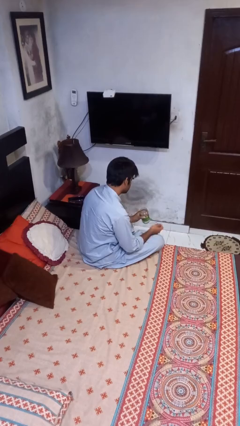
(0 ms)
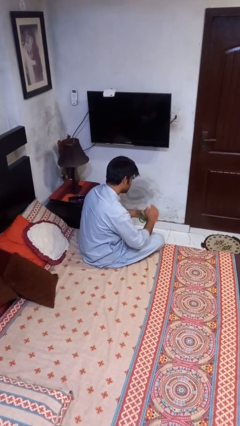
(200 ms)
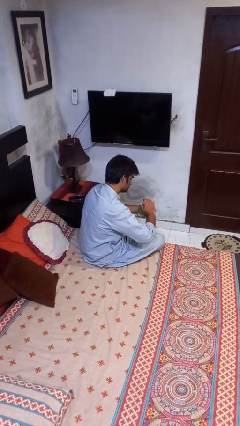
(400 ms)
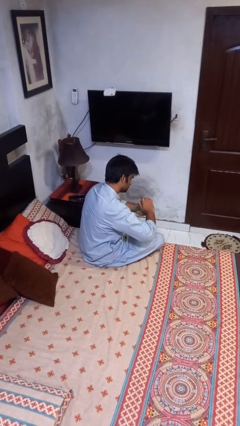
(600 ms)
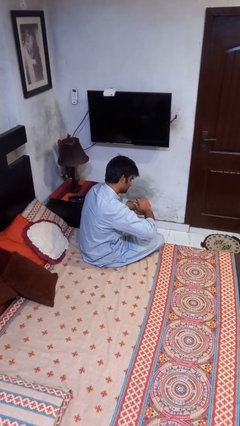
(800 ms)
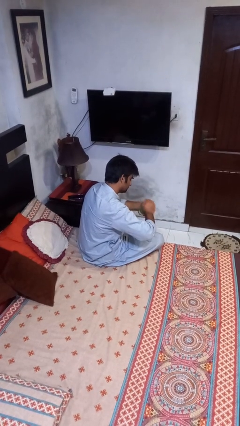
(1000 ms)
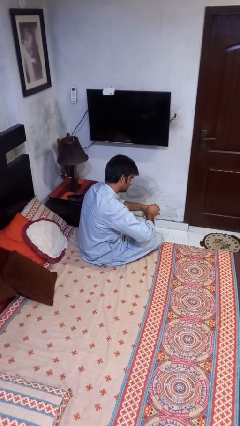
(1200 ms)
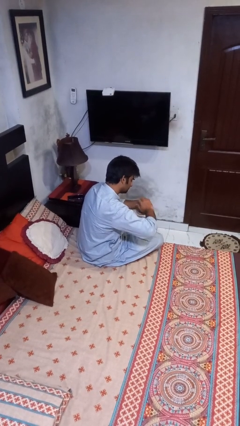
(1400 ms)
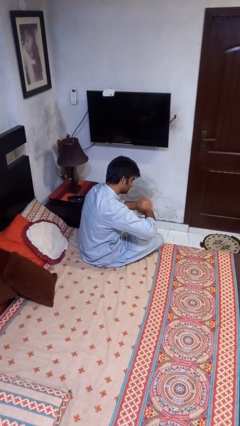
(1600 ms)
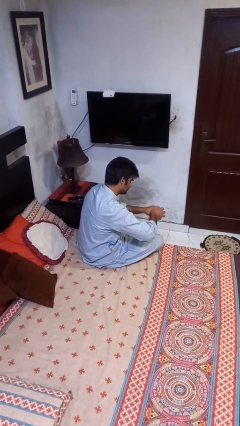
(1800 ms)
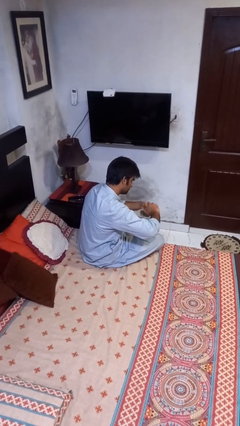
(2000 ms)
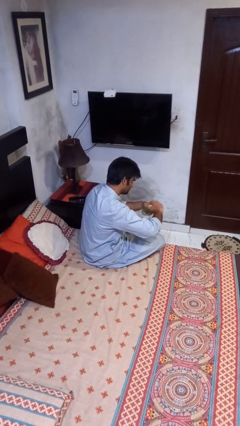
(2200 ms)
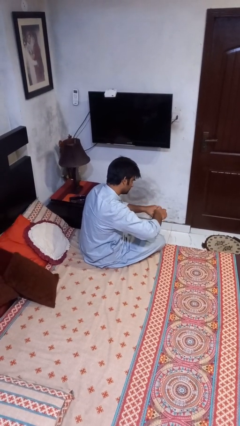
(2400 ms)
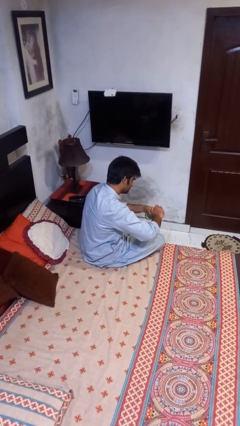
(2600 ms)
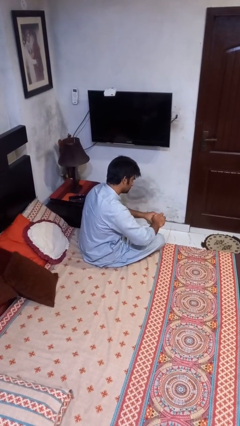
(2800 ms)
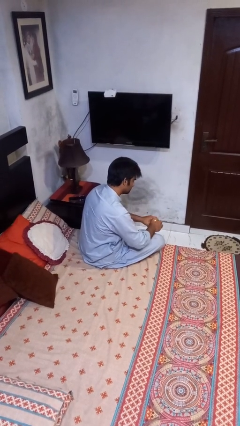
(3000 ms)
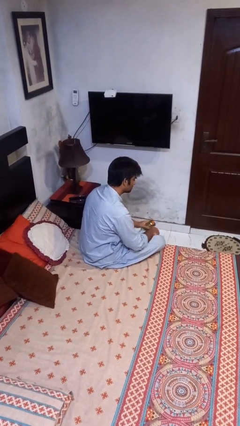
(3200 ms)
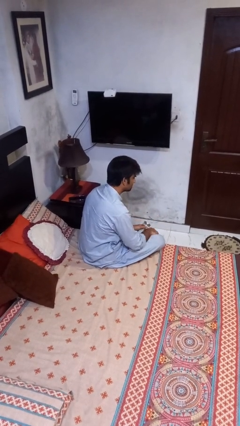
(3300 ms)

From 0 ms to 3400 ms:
person closes jar

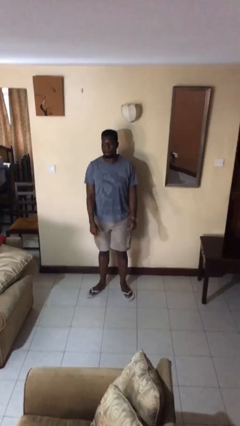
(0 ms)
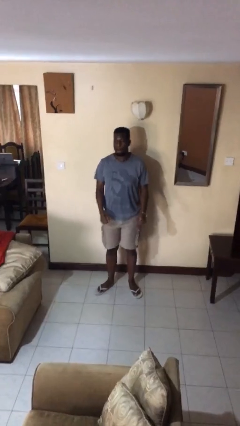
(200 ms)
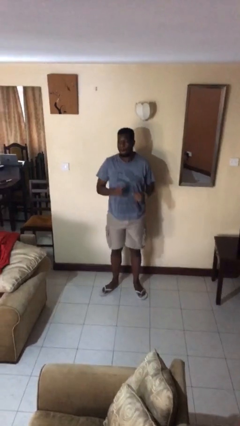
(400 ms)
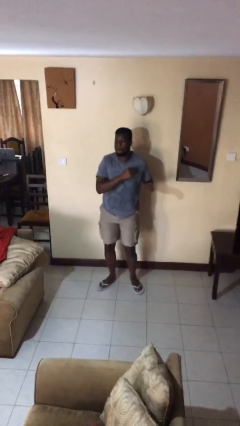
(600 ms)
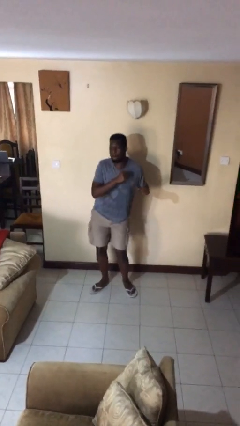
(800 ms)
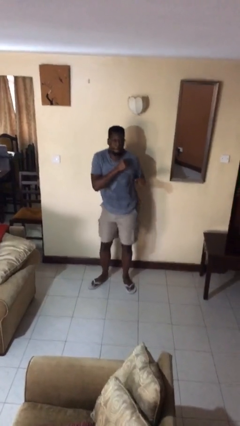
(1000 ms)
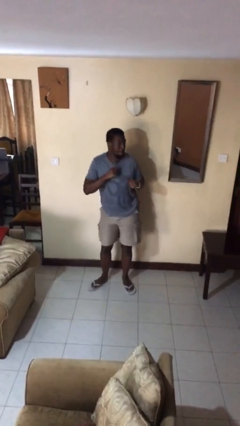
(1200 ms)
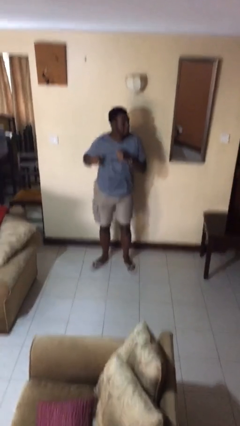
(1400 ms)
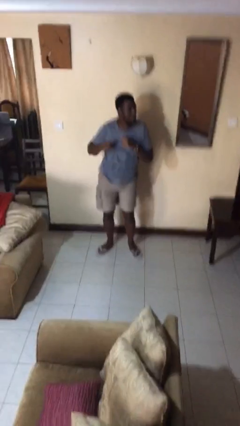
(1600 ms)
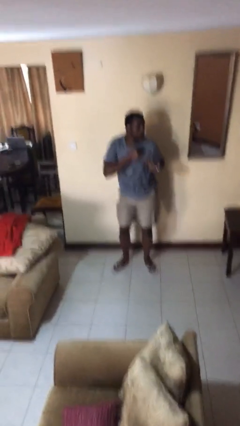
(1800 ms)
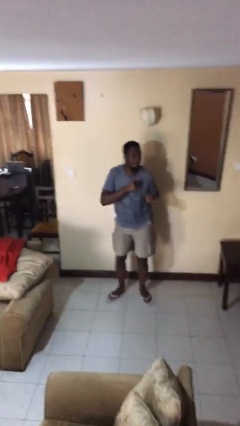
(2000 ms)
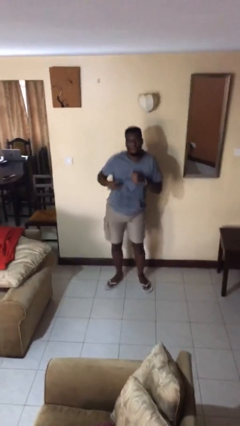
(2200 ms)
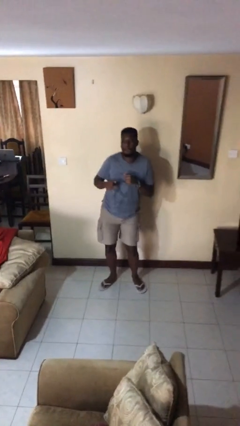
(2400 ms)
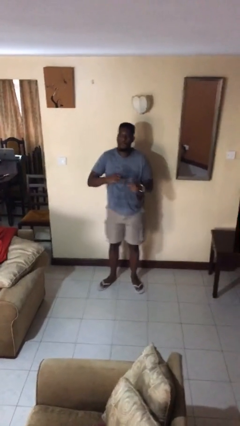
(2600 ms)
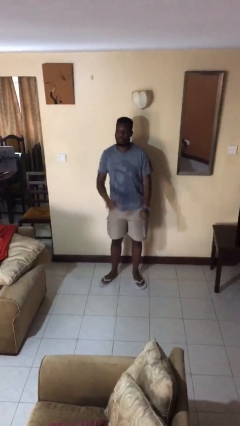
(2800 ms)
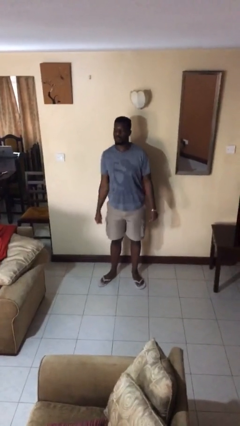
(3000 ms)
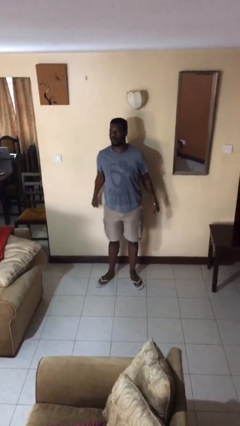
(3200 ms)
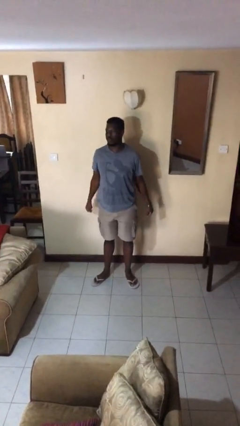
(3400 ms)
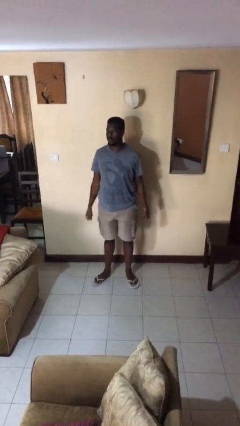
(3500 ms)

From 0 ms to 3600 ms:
person wiggles hips

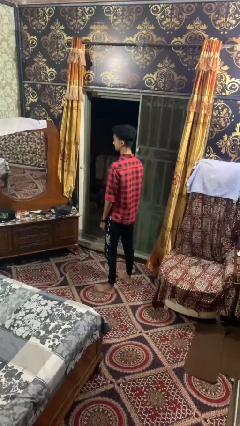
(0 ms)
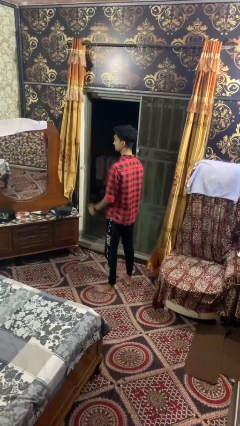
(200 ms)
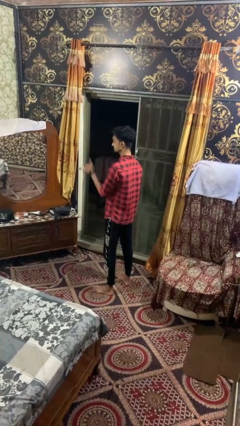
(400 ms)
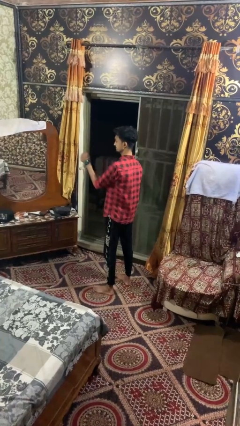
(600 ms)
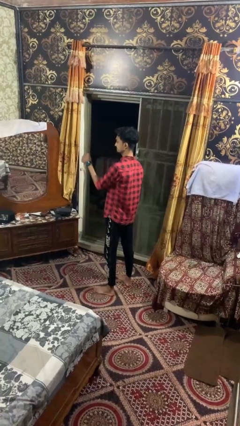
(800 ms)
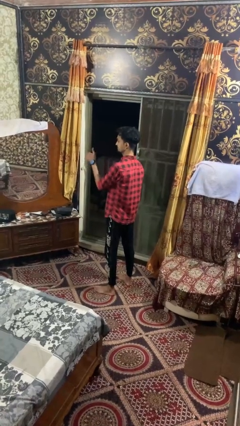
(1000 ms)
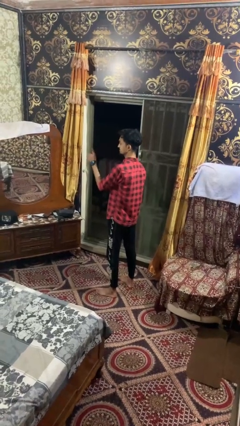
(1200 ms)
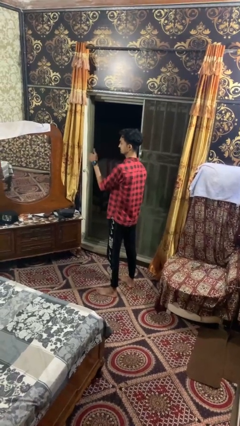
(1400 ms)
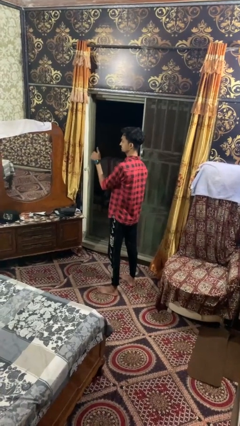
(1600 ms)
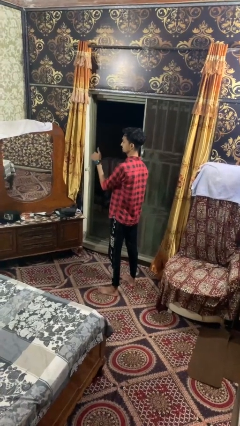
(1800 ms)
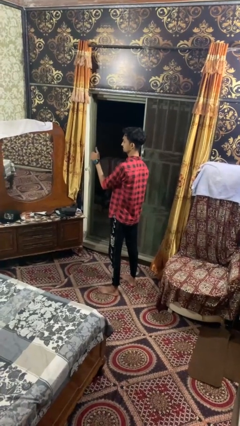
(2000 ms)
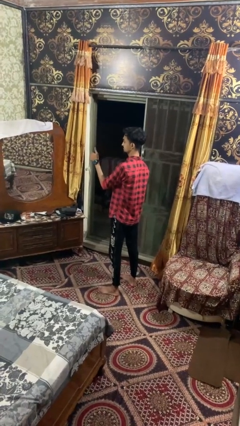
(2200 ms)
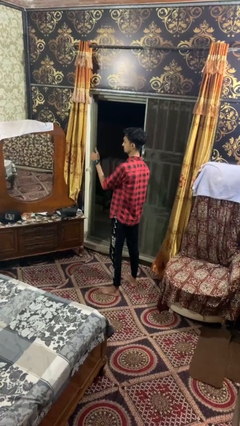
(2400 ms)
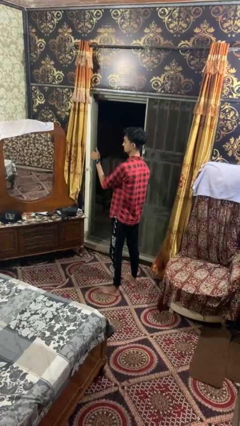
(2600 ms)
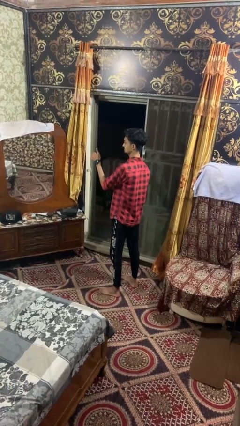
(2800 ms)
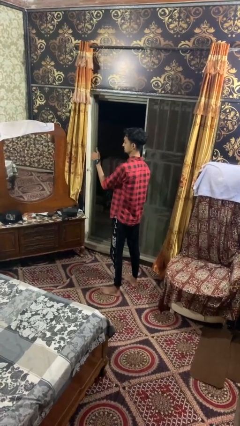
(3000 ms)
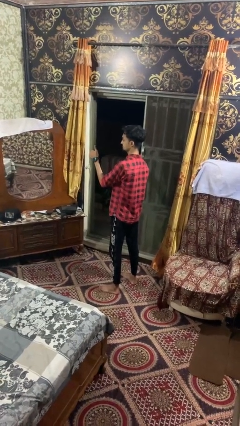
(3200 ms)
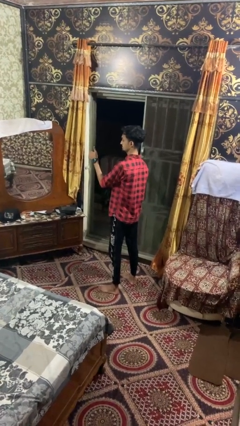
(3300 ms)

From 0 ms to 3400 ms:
person gestures thumbs up

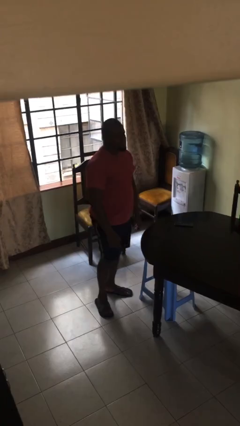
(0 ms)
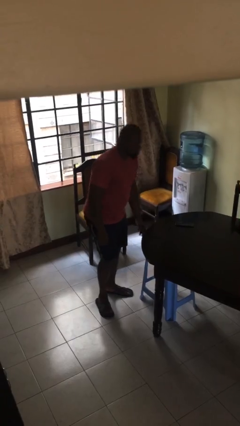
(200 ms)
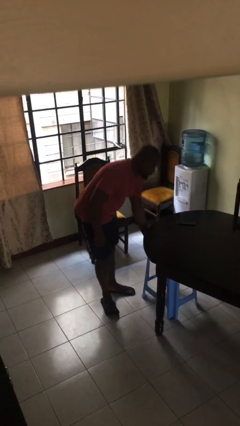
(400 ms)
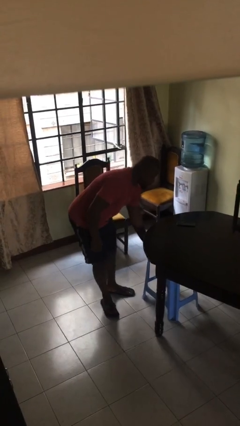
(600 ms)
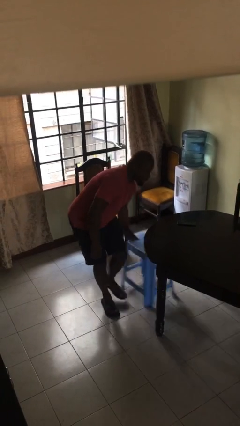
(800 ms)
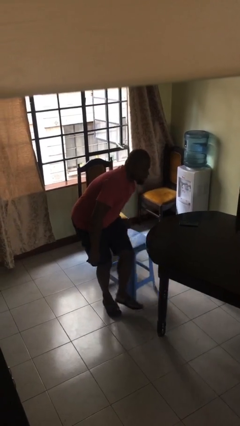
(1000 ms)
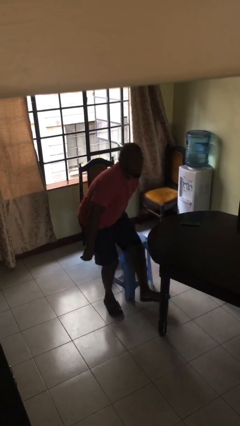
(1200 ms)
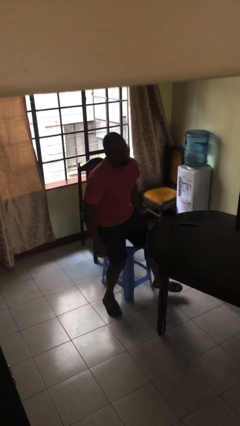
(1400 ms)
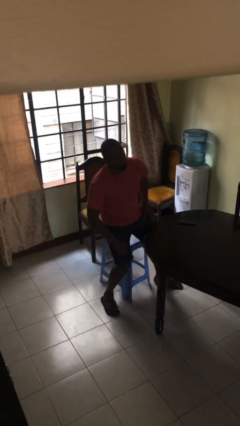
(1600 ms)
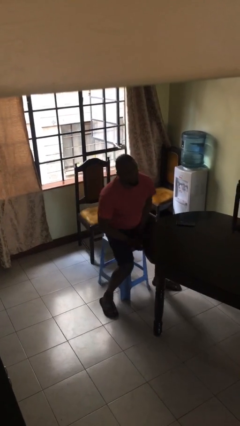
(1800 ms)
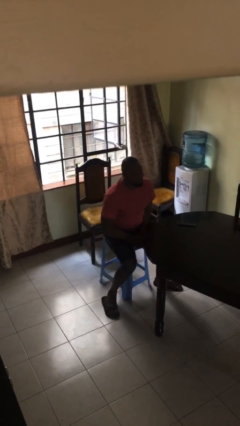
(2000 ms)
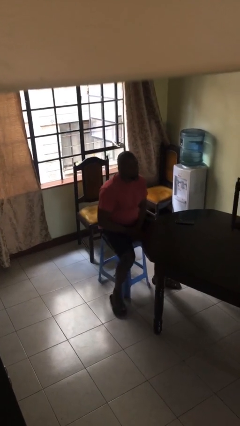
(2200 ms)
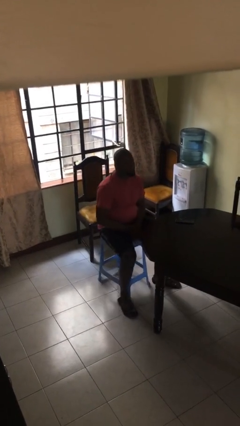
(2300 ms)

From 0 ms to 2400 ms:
person sits down

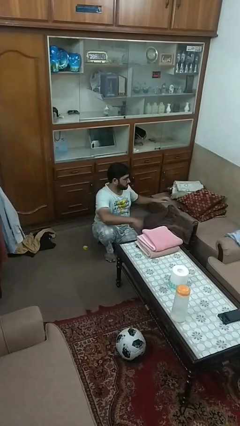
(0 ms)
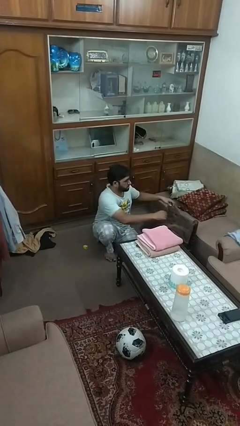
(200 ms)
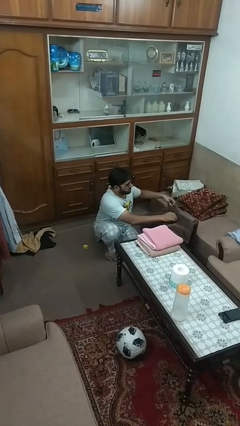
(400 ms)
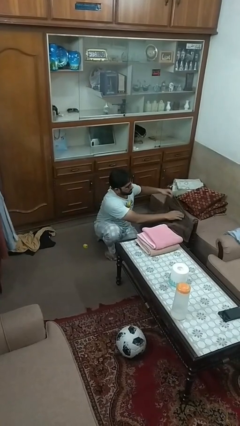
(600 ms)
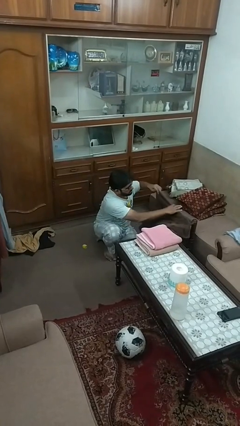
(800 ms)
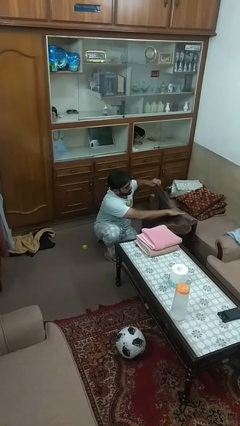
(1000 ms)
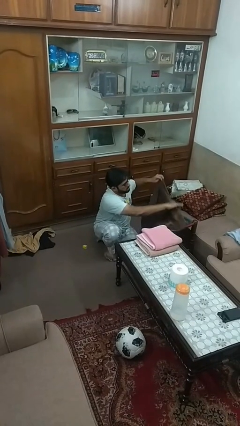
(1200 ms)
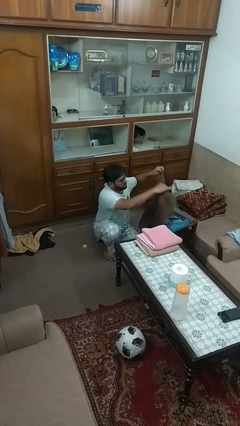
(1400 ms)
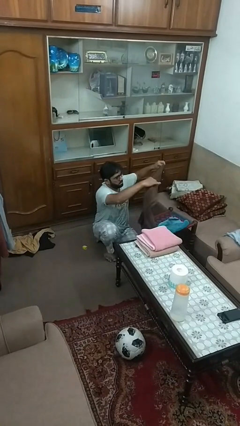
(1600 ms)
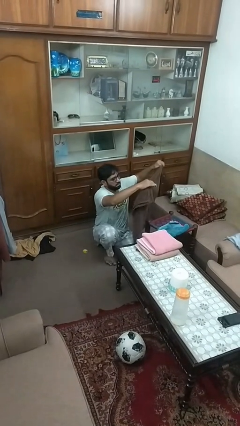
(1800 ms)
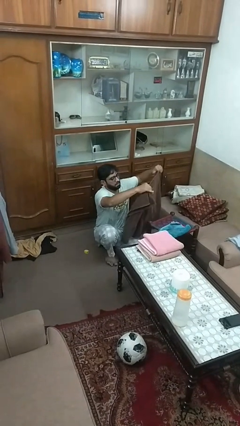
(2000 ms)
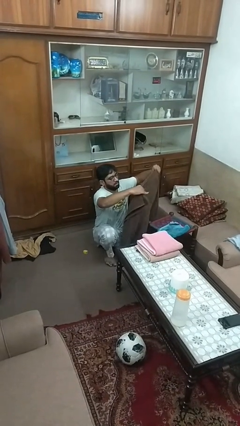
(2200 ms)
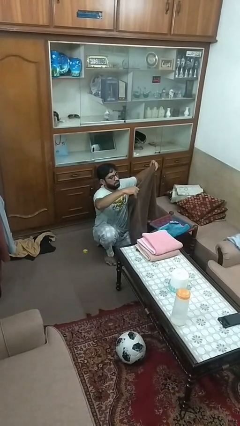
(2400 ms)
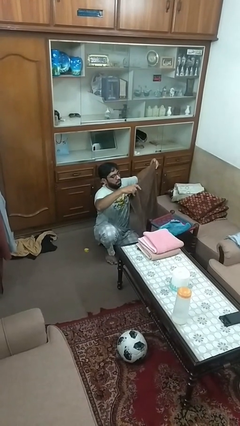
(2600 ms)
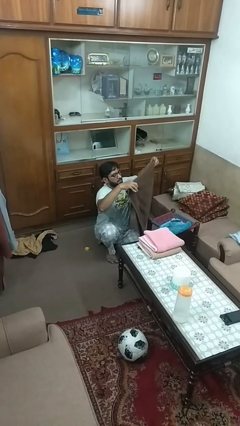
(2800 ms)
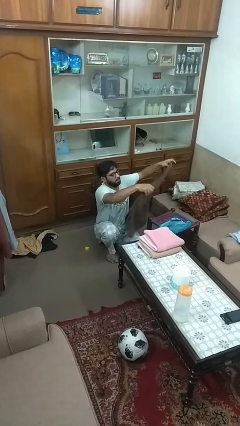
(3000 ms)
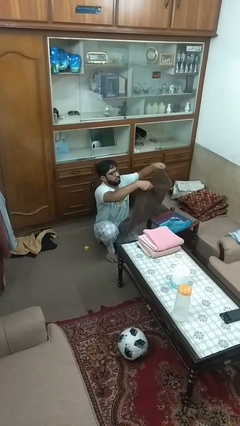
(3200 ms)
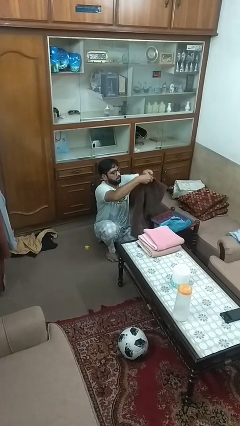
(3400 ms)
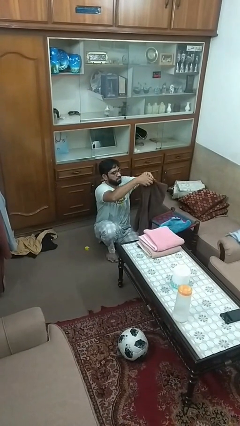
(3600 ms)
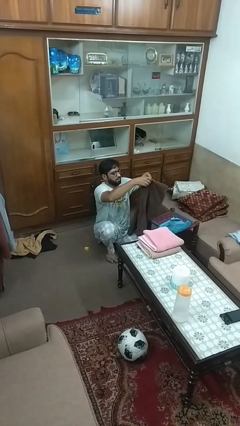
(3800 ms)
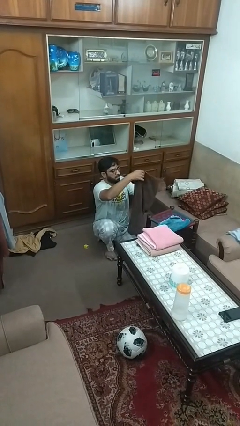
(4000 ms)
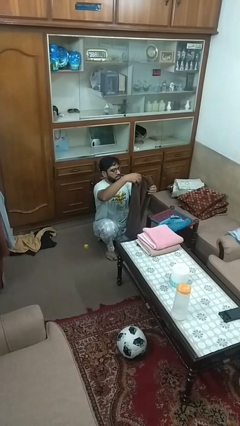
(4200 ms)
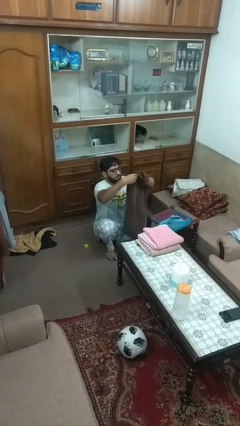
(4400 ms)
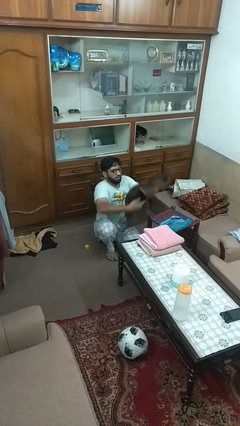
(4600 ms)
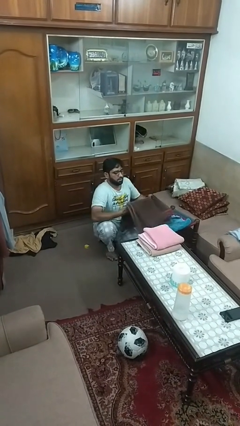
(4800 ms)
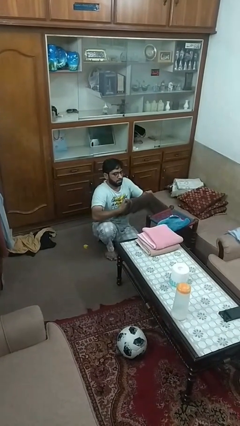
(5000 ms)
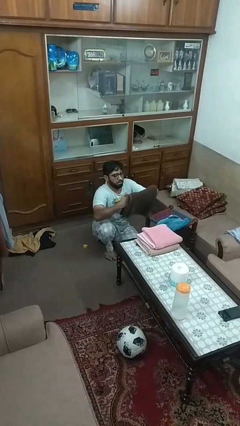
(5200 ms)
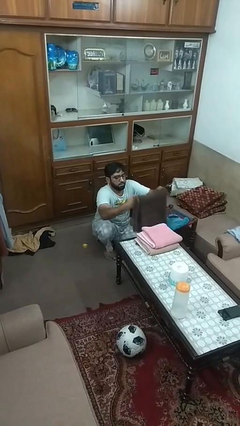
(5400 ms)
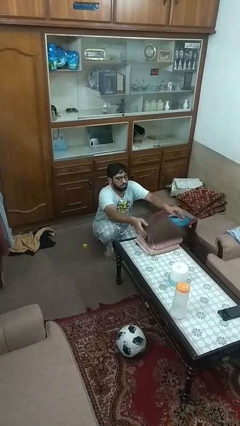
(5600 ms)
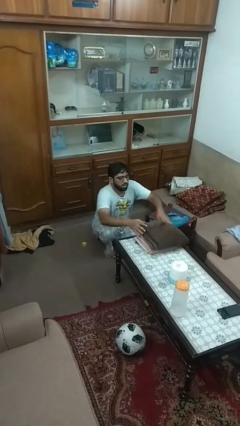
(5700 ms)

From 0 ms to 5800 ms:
person folds towel
